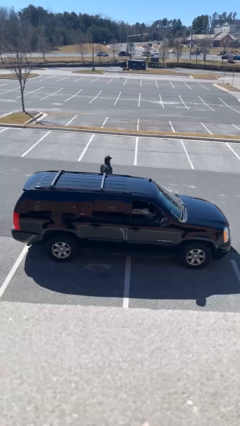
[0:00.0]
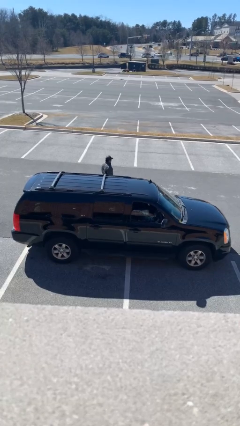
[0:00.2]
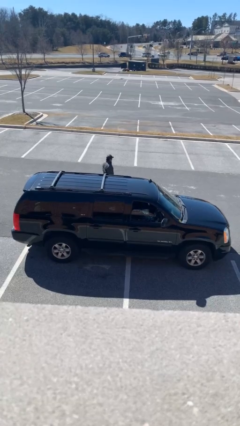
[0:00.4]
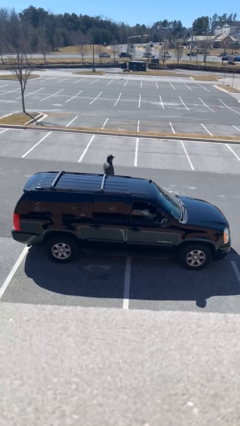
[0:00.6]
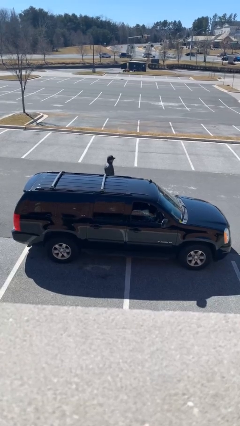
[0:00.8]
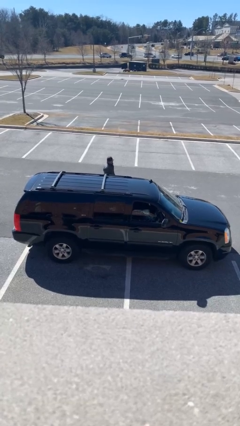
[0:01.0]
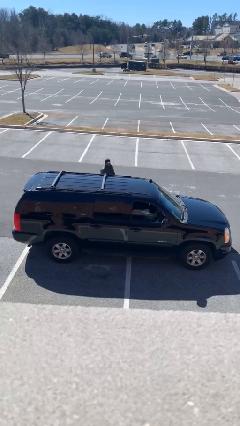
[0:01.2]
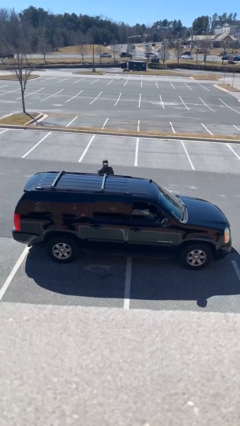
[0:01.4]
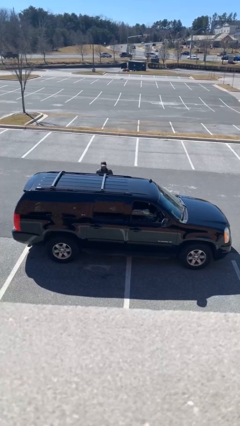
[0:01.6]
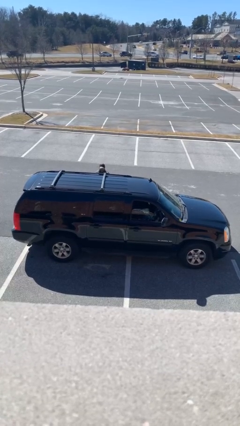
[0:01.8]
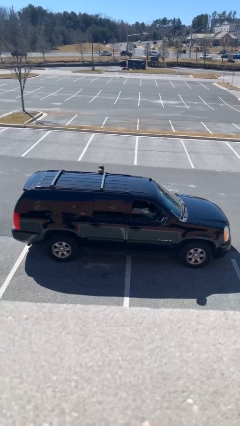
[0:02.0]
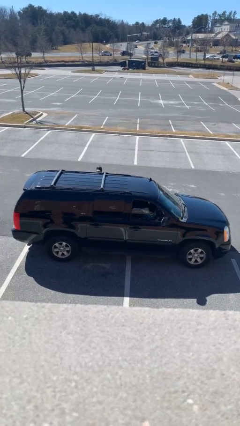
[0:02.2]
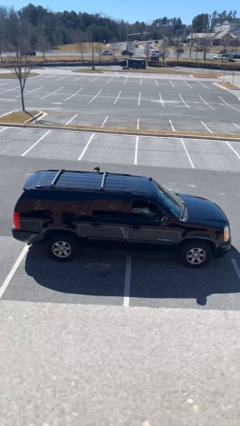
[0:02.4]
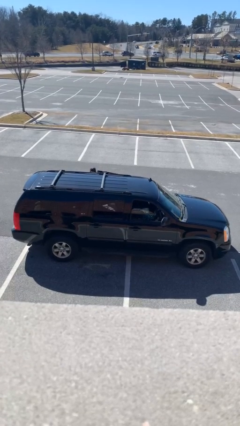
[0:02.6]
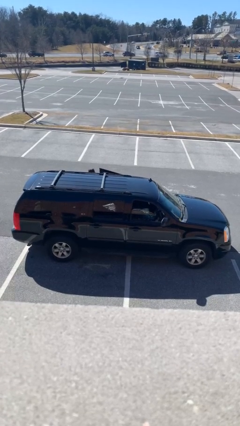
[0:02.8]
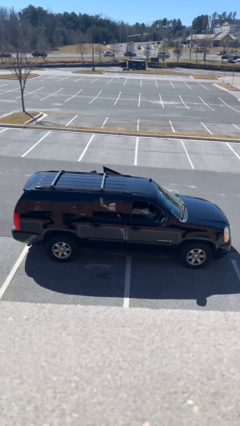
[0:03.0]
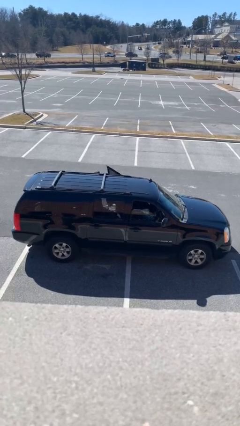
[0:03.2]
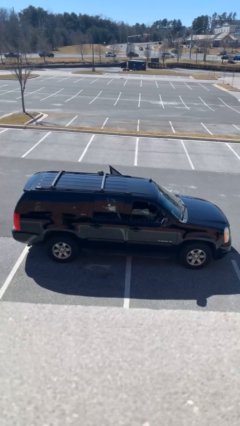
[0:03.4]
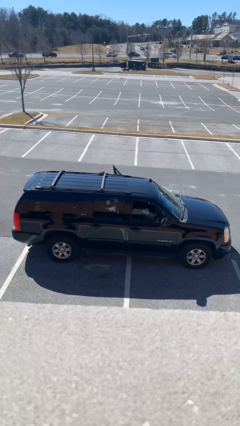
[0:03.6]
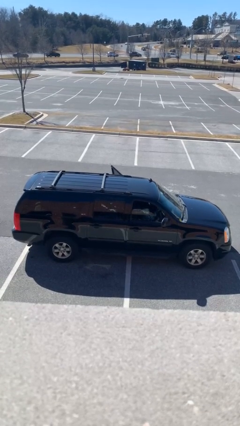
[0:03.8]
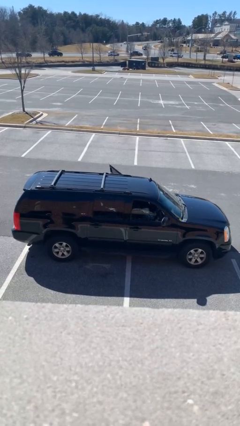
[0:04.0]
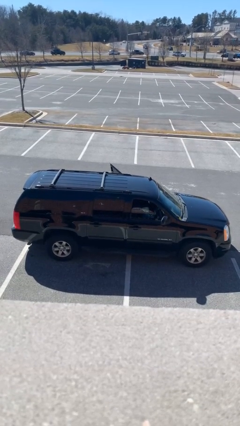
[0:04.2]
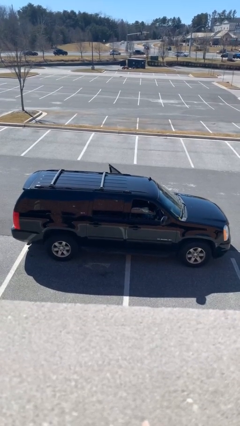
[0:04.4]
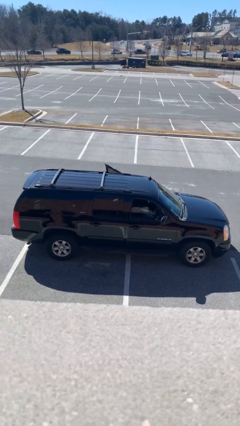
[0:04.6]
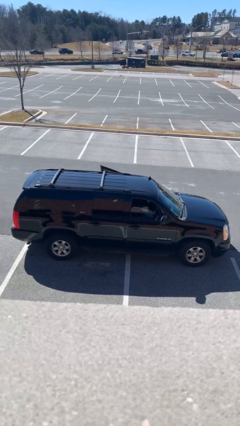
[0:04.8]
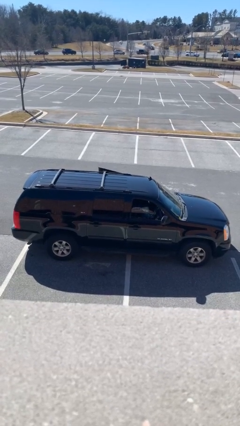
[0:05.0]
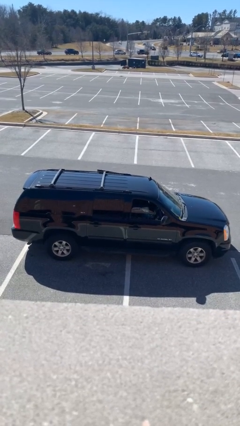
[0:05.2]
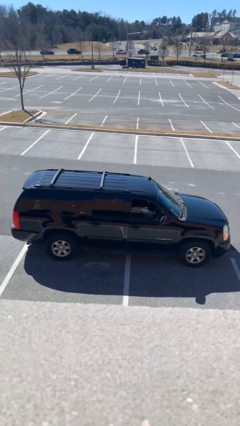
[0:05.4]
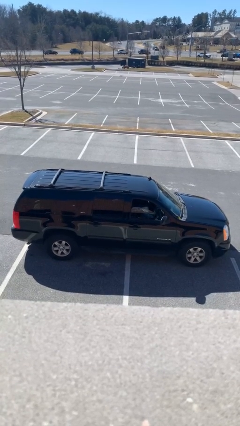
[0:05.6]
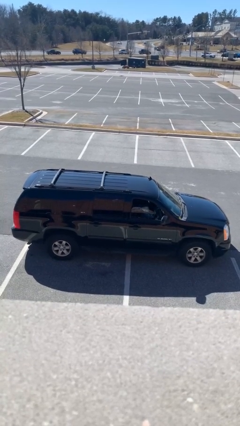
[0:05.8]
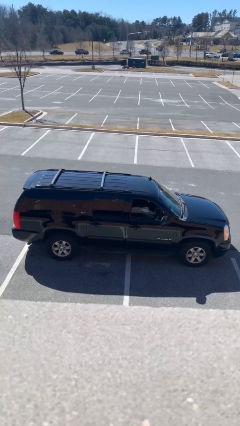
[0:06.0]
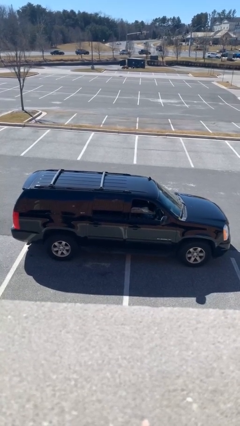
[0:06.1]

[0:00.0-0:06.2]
car picks up person

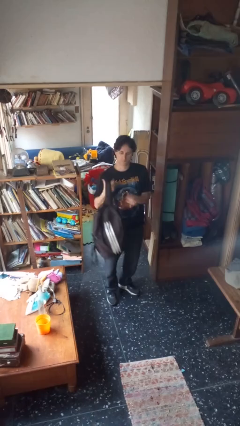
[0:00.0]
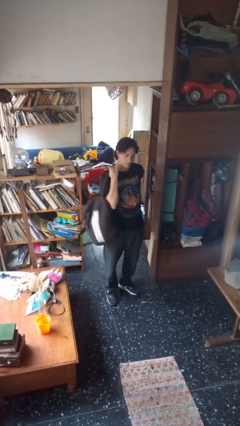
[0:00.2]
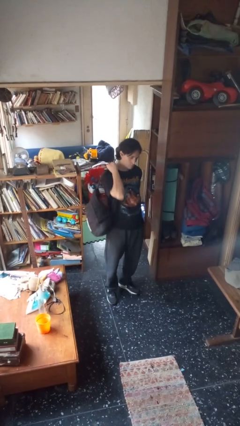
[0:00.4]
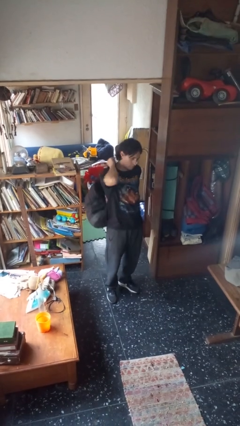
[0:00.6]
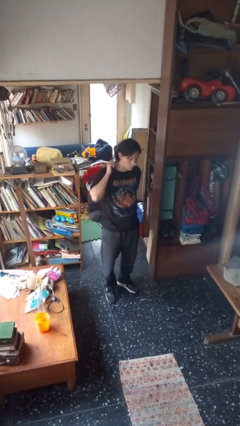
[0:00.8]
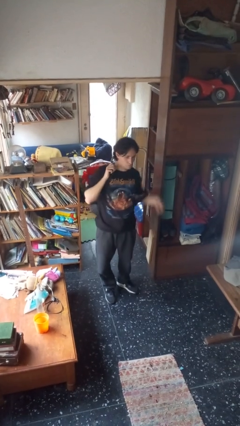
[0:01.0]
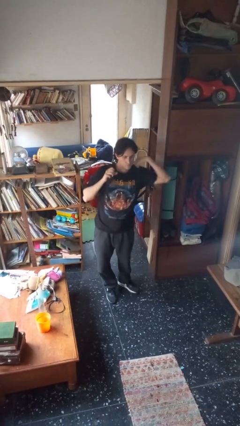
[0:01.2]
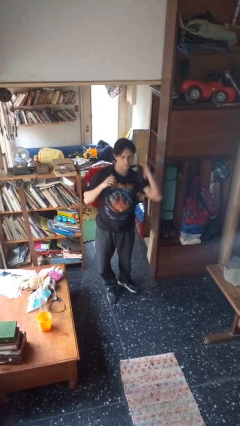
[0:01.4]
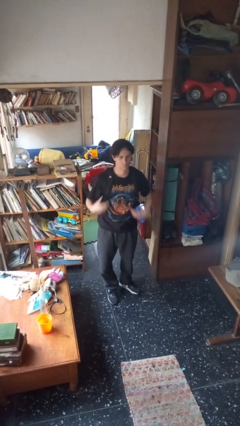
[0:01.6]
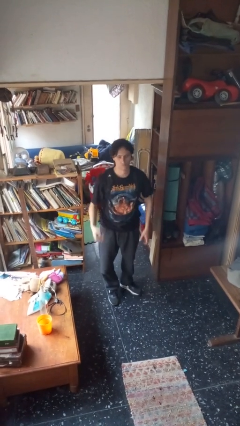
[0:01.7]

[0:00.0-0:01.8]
person puts on backpack

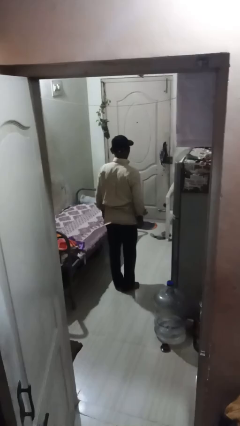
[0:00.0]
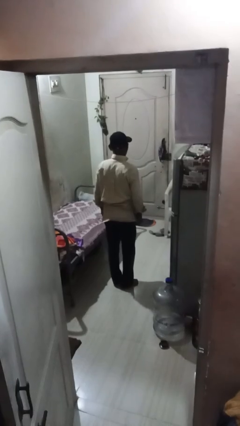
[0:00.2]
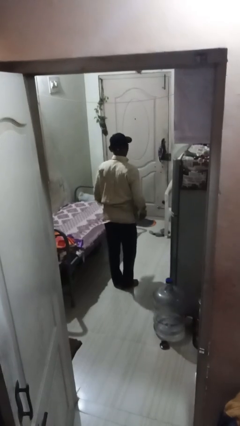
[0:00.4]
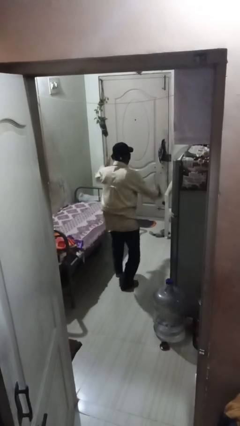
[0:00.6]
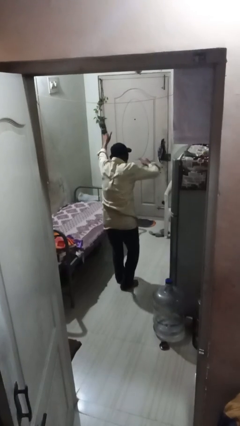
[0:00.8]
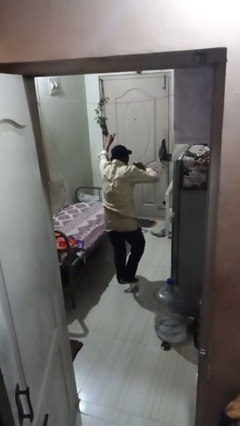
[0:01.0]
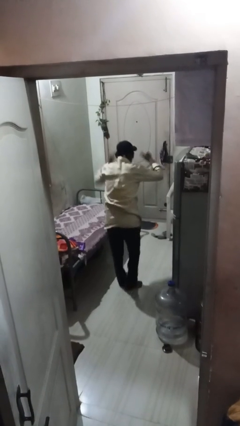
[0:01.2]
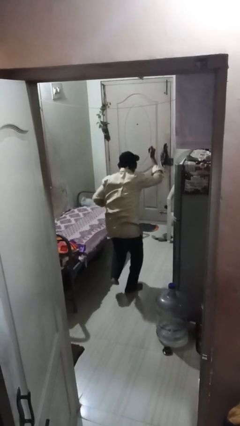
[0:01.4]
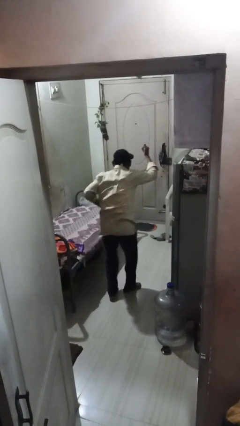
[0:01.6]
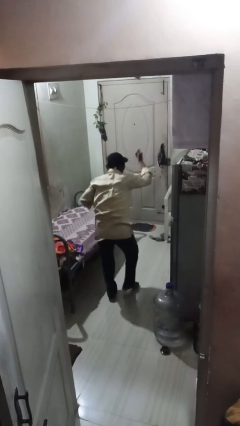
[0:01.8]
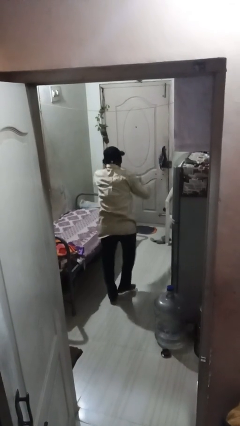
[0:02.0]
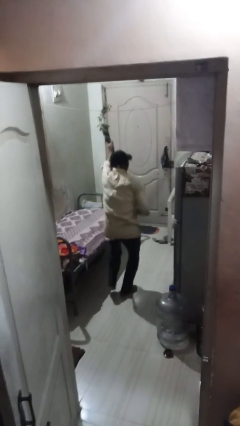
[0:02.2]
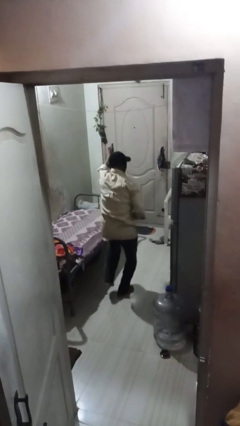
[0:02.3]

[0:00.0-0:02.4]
person dances in place

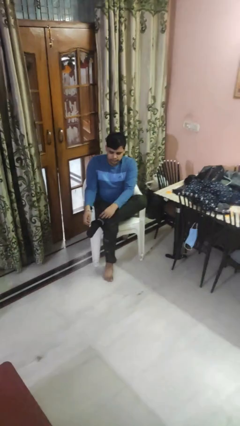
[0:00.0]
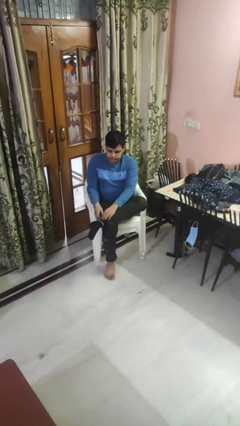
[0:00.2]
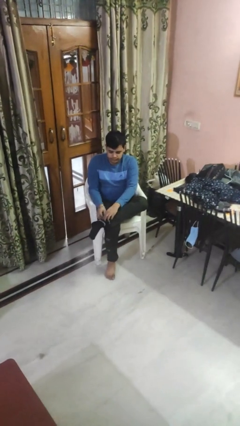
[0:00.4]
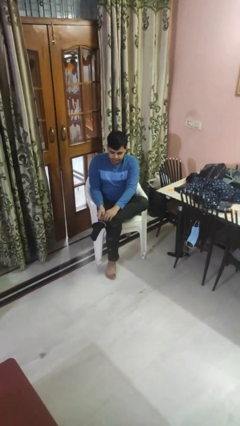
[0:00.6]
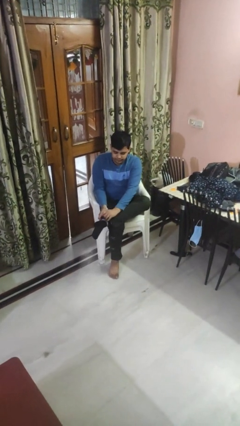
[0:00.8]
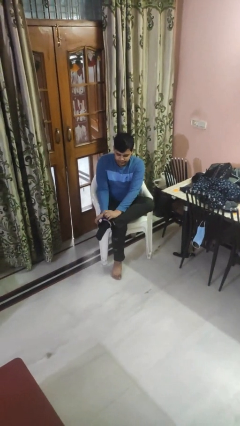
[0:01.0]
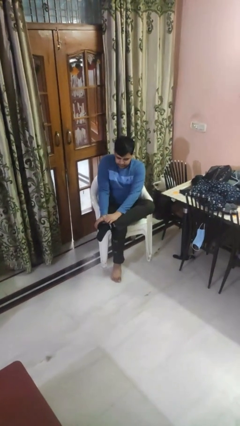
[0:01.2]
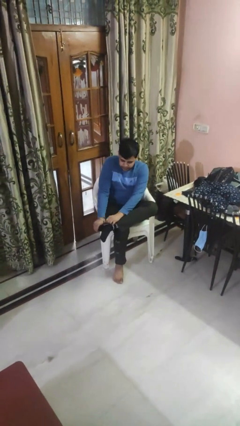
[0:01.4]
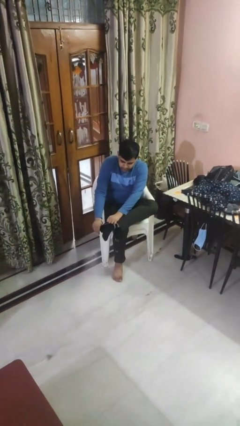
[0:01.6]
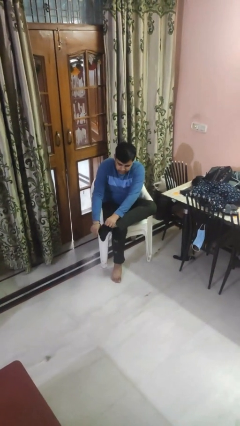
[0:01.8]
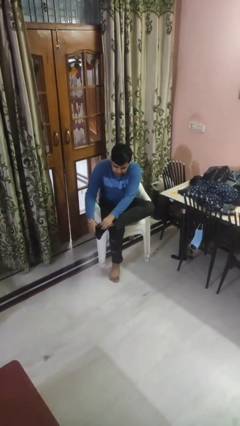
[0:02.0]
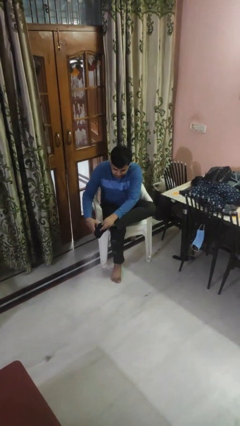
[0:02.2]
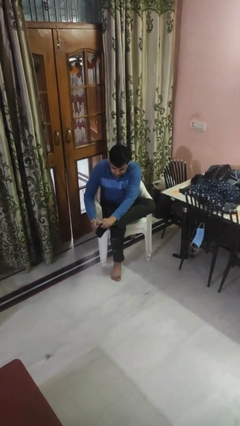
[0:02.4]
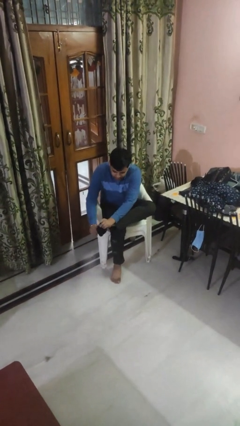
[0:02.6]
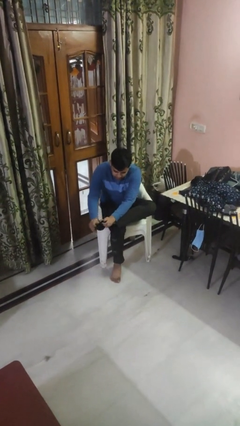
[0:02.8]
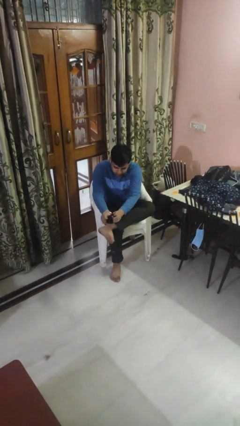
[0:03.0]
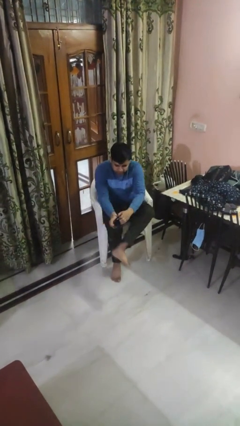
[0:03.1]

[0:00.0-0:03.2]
person takes off socks

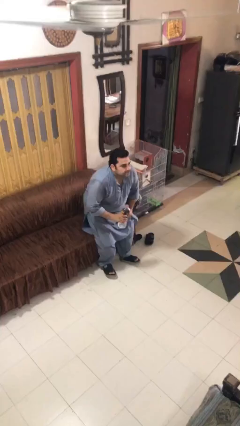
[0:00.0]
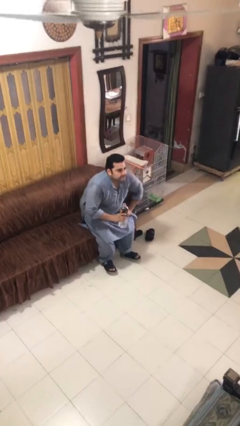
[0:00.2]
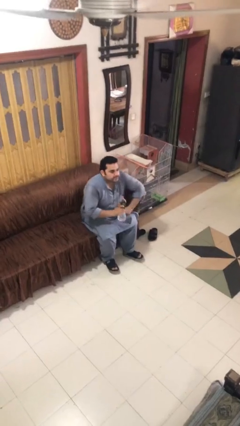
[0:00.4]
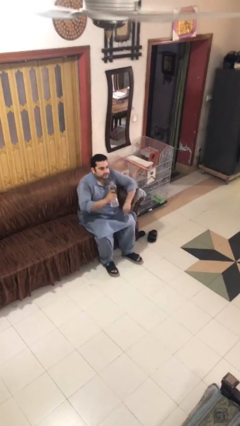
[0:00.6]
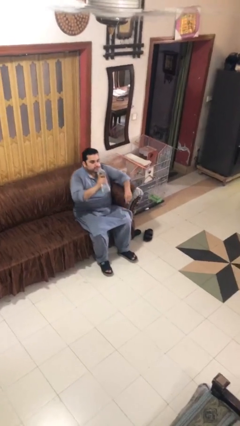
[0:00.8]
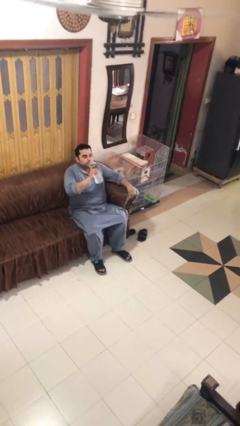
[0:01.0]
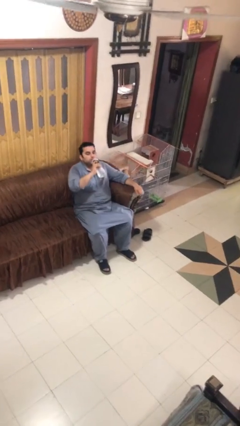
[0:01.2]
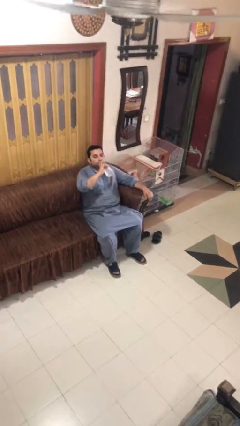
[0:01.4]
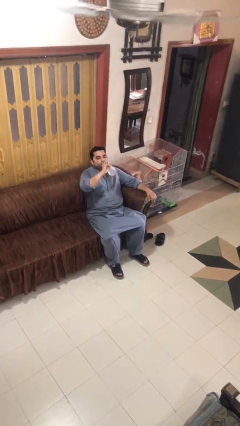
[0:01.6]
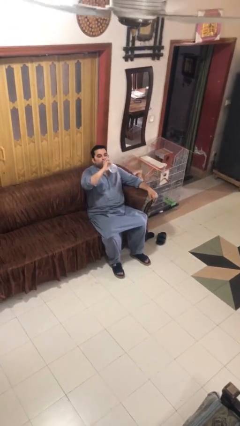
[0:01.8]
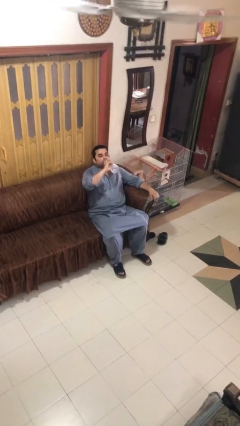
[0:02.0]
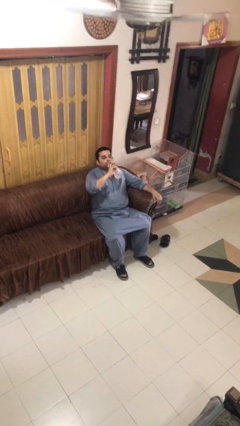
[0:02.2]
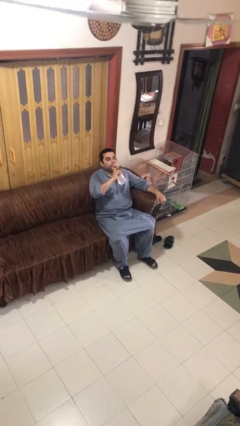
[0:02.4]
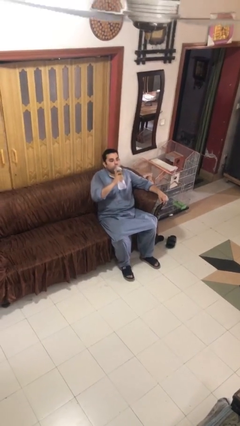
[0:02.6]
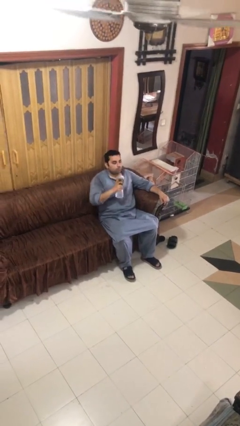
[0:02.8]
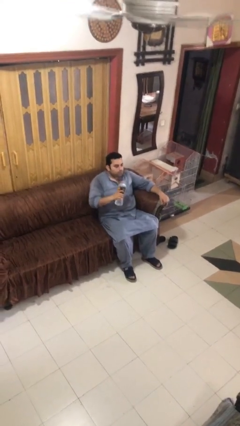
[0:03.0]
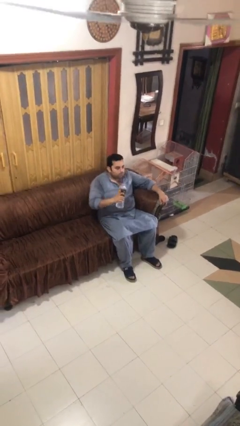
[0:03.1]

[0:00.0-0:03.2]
person drinks from bottle

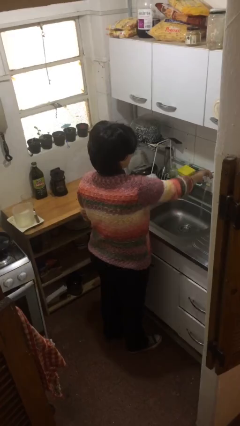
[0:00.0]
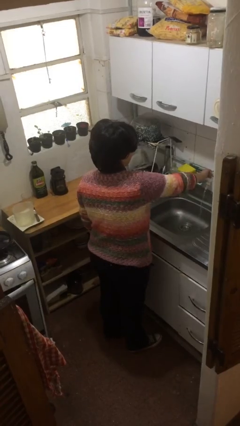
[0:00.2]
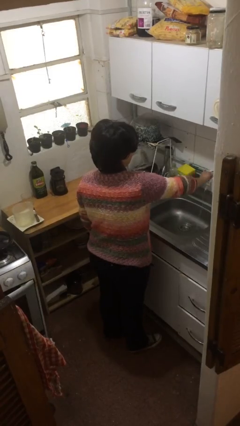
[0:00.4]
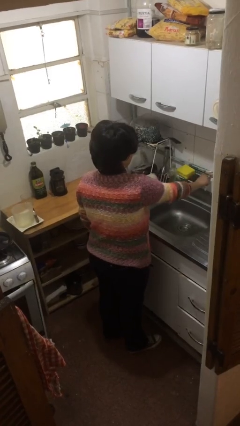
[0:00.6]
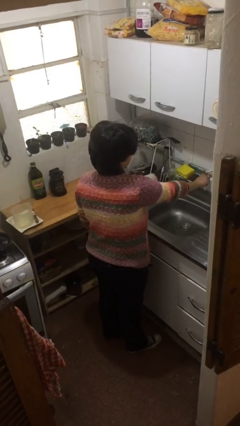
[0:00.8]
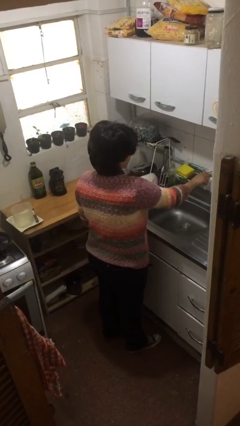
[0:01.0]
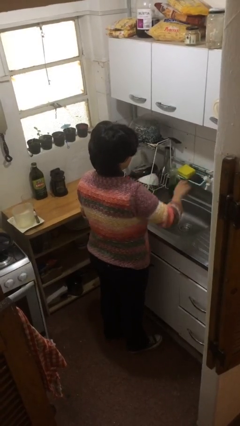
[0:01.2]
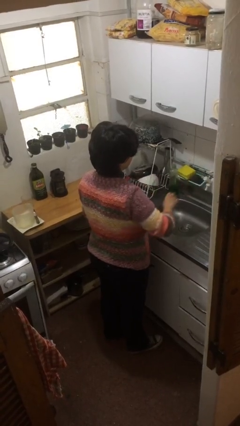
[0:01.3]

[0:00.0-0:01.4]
person turns off faucet
